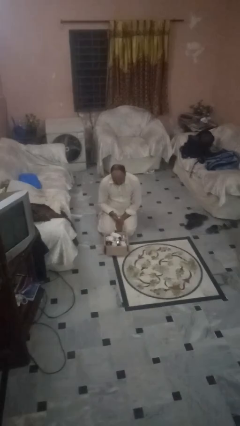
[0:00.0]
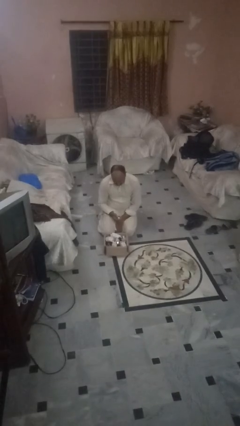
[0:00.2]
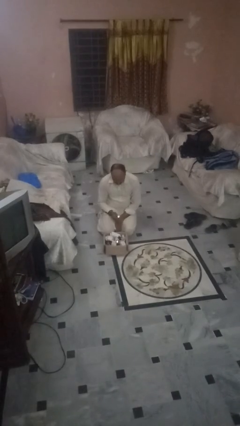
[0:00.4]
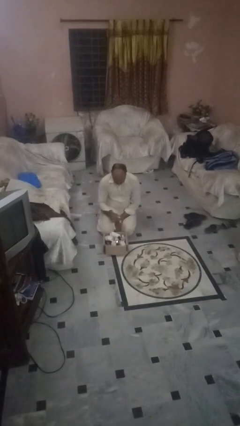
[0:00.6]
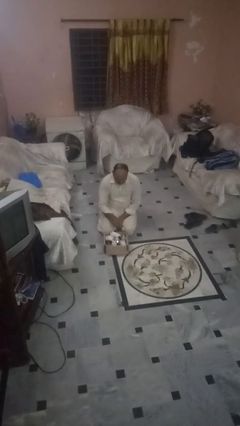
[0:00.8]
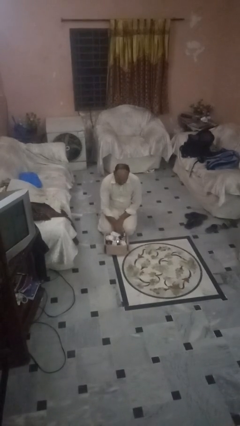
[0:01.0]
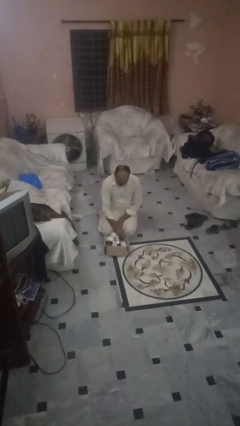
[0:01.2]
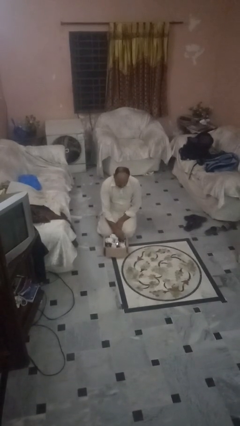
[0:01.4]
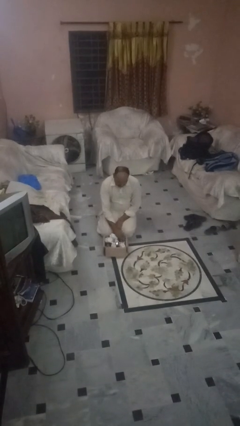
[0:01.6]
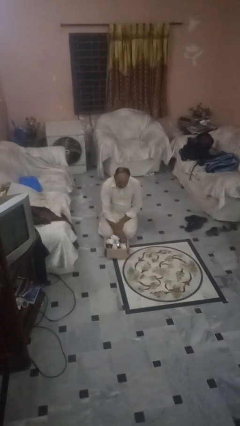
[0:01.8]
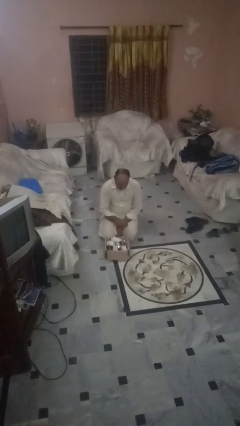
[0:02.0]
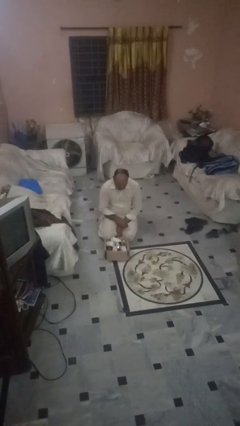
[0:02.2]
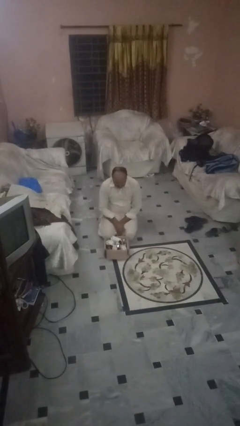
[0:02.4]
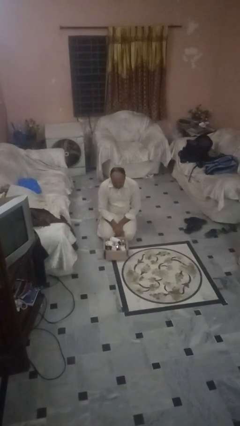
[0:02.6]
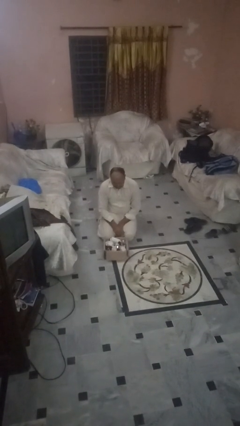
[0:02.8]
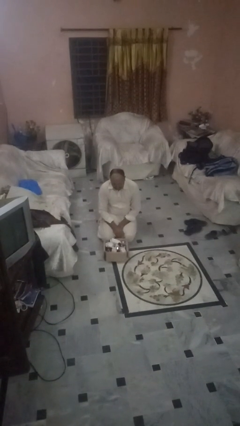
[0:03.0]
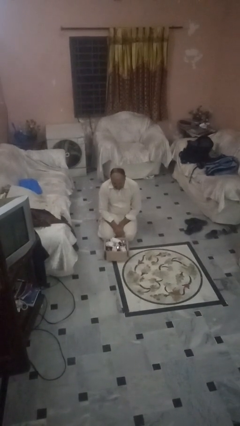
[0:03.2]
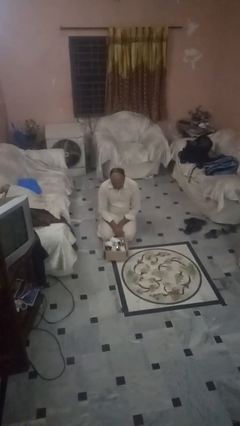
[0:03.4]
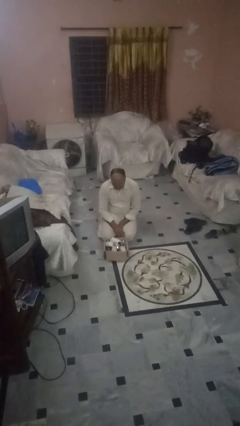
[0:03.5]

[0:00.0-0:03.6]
person puts object into box

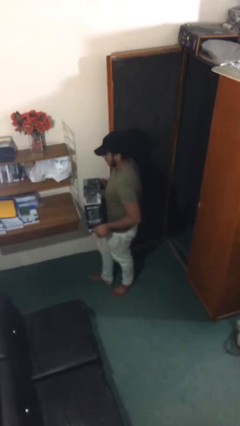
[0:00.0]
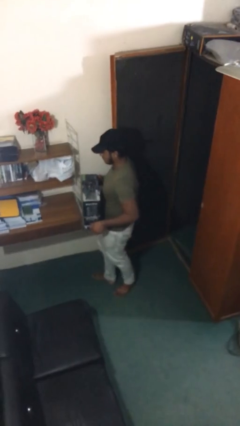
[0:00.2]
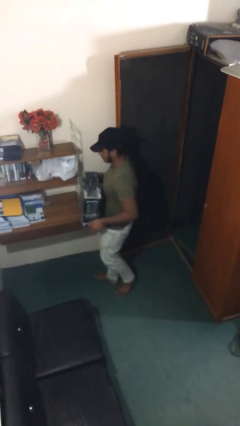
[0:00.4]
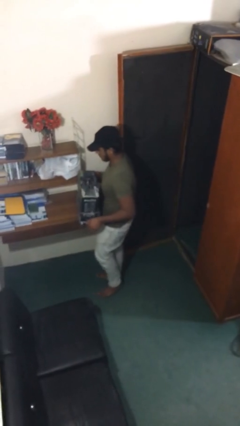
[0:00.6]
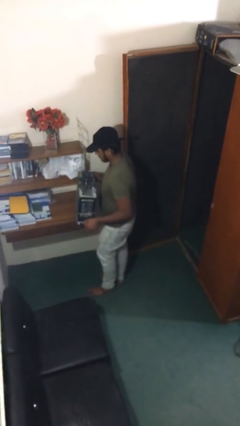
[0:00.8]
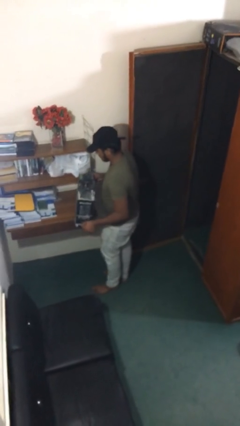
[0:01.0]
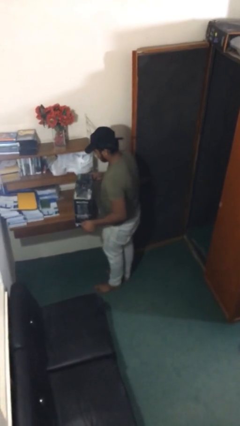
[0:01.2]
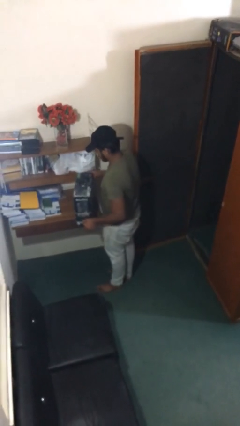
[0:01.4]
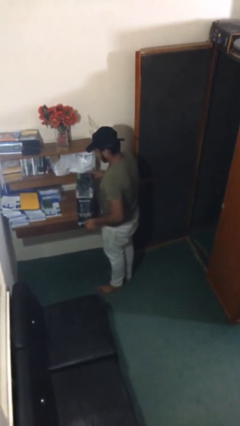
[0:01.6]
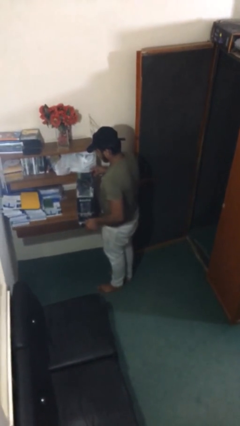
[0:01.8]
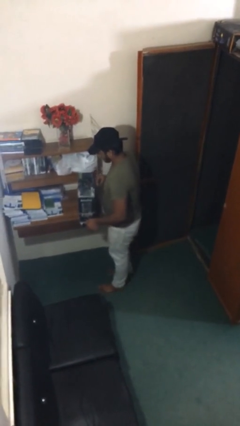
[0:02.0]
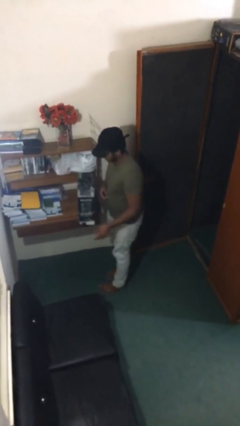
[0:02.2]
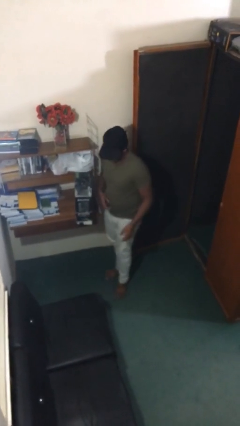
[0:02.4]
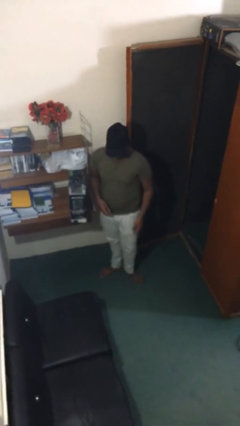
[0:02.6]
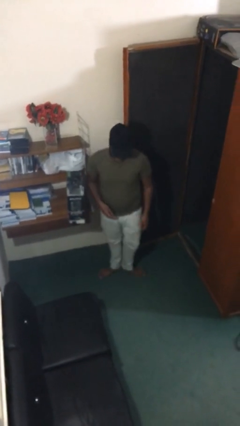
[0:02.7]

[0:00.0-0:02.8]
person puts down object on table

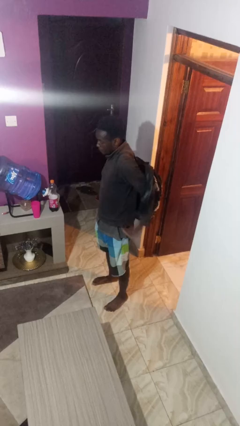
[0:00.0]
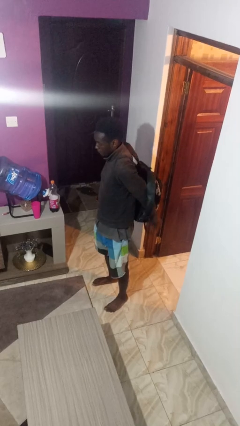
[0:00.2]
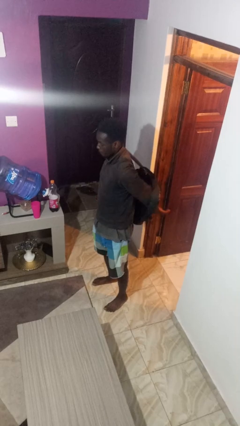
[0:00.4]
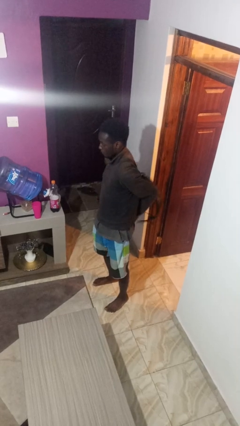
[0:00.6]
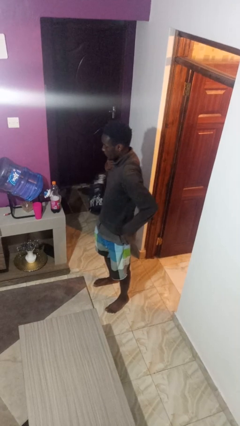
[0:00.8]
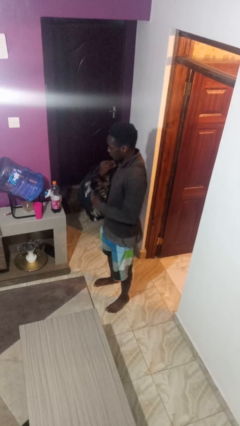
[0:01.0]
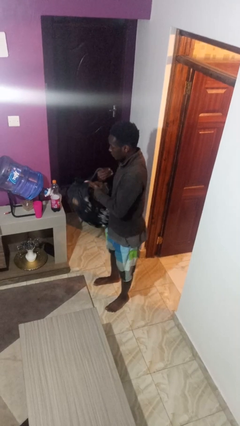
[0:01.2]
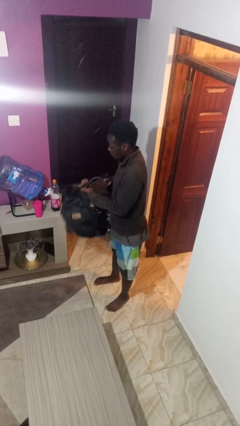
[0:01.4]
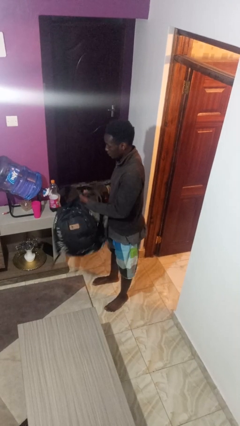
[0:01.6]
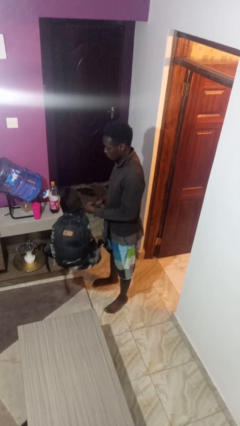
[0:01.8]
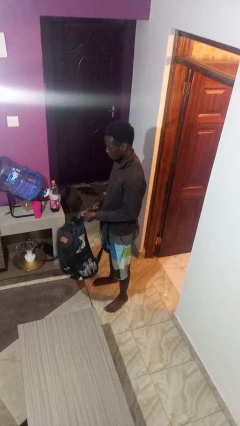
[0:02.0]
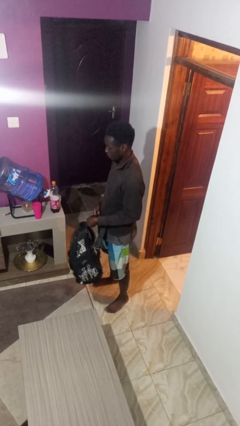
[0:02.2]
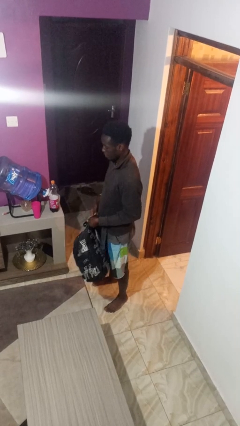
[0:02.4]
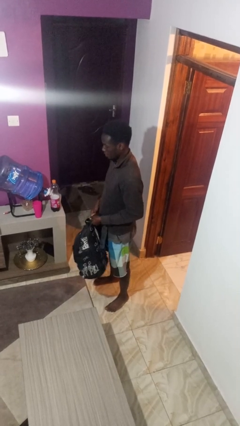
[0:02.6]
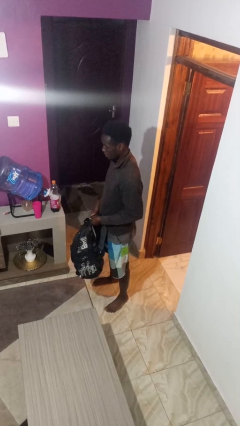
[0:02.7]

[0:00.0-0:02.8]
person takes off backpack

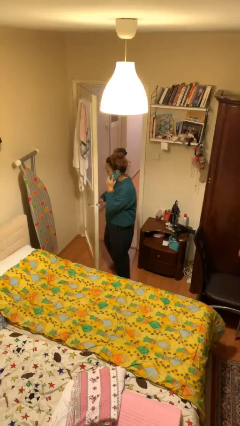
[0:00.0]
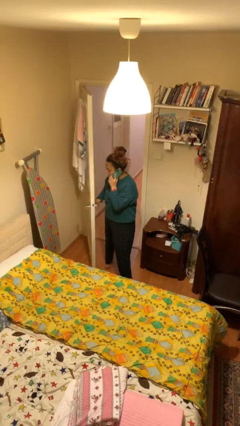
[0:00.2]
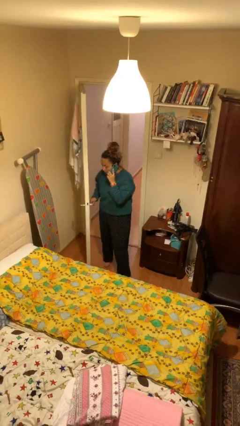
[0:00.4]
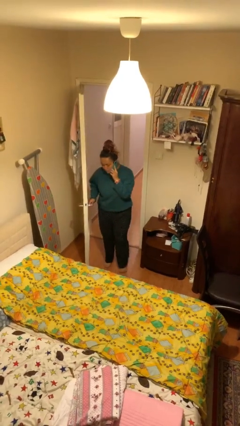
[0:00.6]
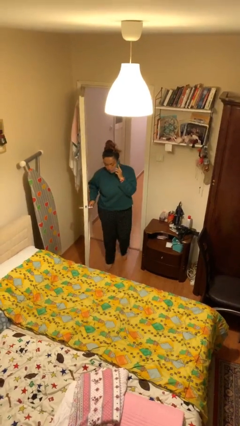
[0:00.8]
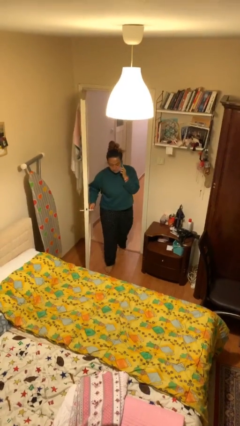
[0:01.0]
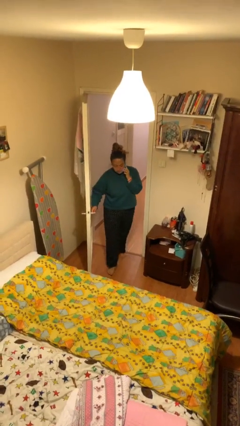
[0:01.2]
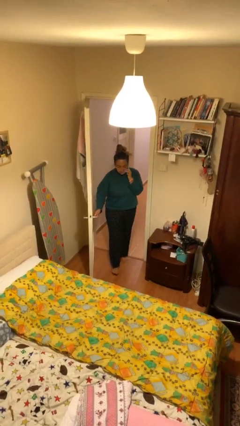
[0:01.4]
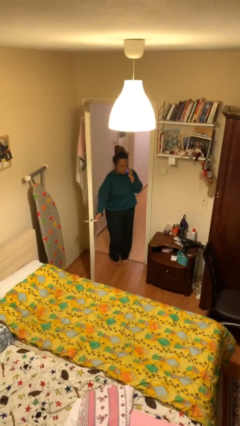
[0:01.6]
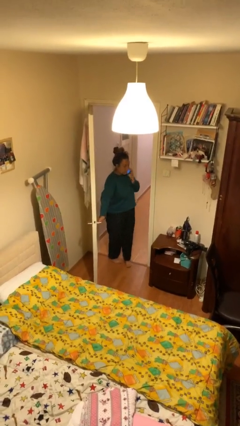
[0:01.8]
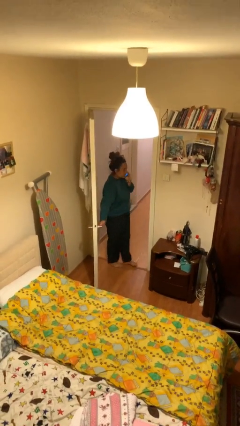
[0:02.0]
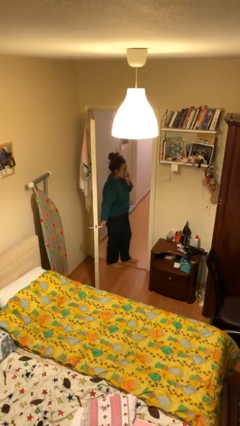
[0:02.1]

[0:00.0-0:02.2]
person exits scene through structure

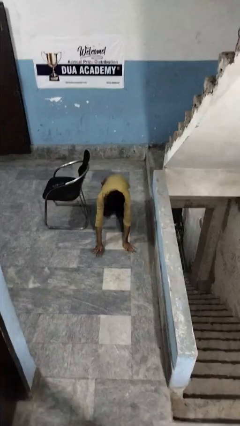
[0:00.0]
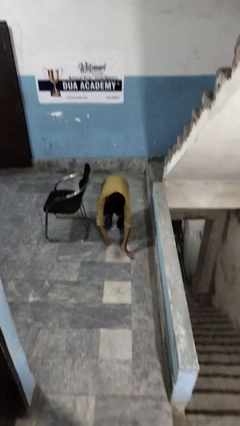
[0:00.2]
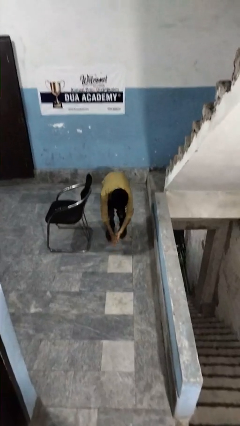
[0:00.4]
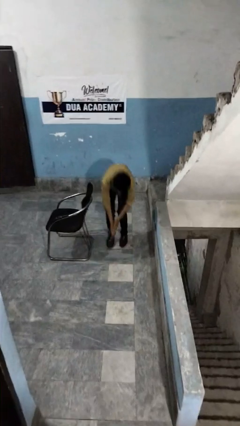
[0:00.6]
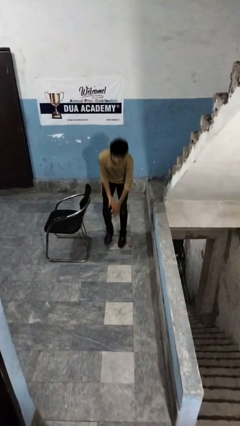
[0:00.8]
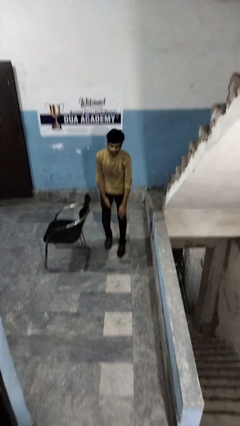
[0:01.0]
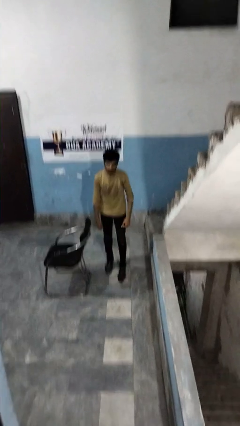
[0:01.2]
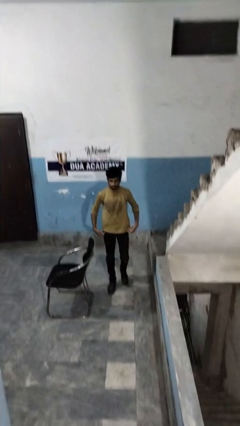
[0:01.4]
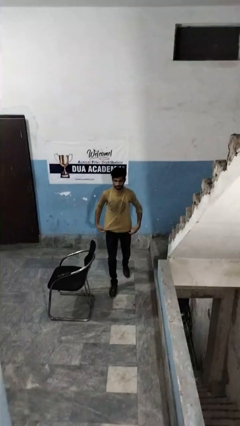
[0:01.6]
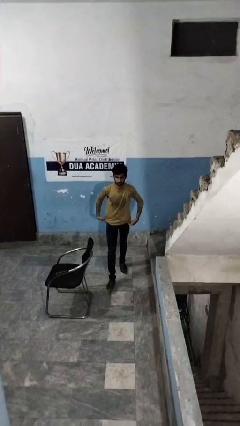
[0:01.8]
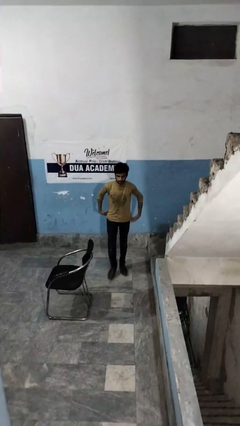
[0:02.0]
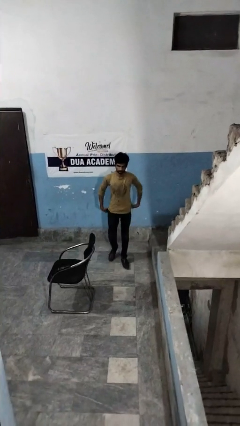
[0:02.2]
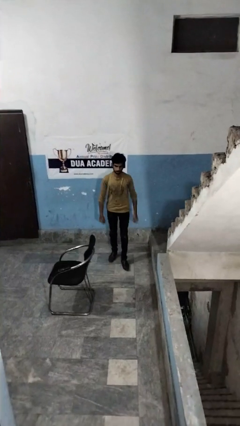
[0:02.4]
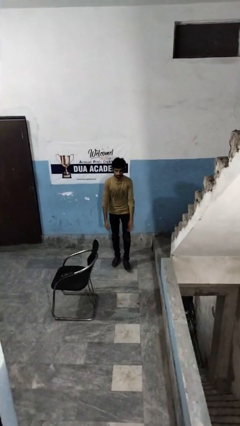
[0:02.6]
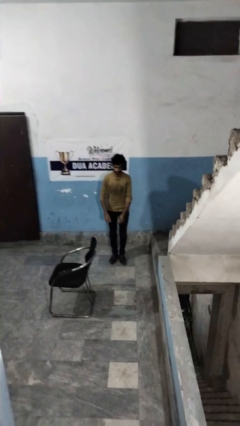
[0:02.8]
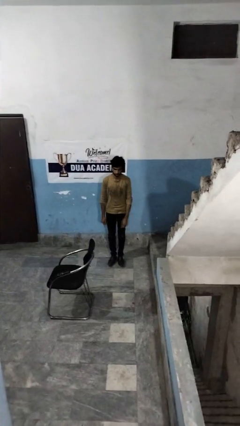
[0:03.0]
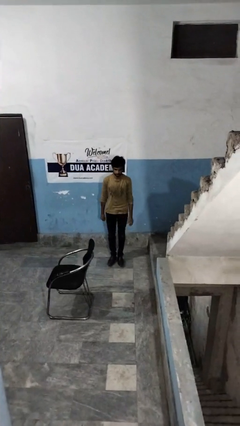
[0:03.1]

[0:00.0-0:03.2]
person stands up from floor

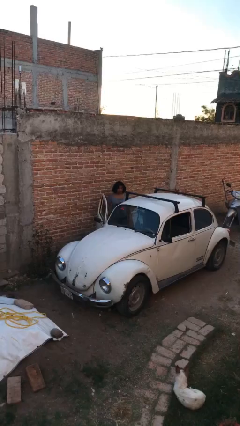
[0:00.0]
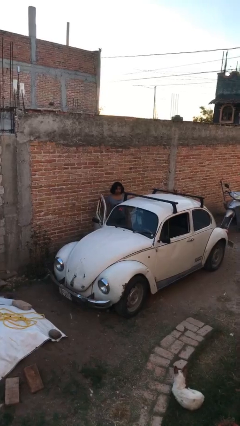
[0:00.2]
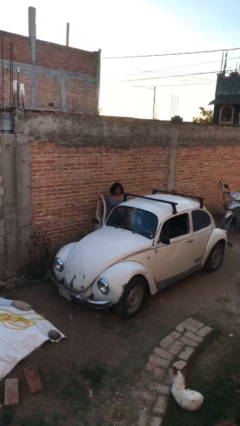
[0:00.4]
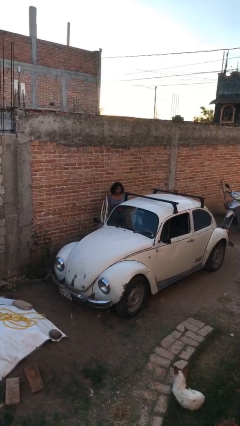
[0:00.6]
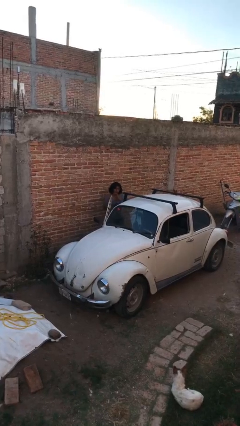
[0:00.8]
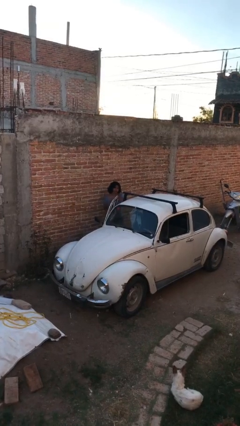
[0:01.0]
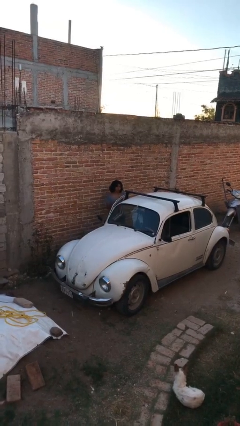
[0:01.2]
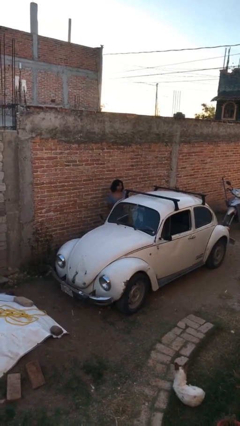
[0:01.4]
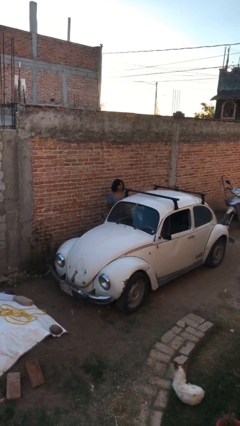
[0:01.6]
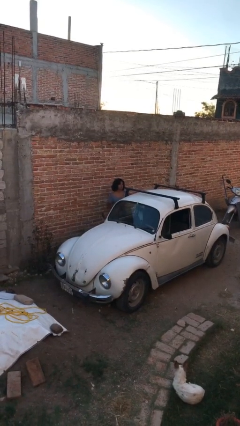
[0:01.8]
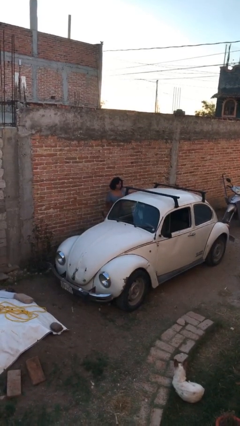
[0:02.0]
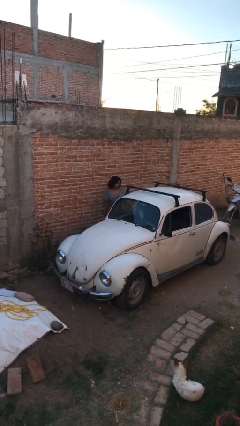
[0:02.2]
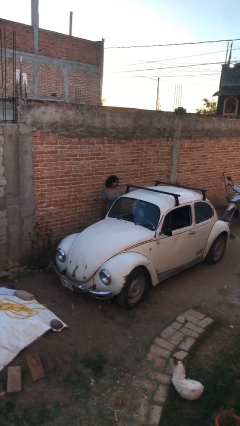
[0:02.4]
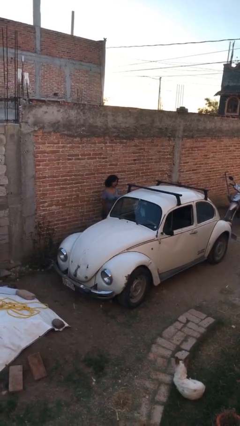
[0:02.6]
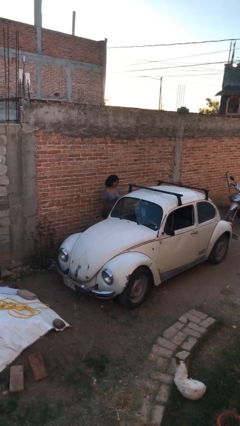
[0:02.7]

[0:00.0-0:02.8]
person closes car door

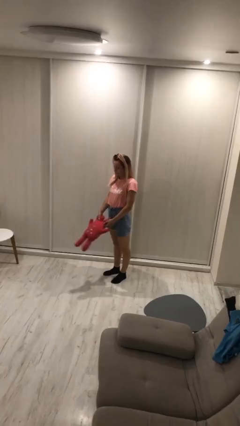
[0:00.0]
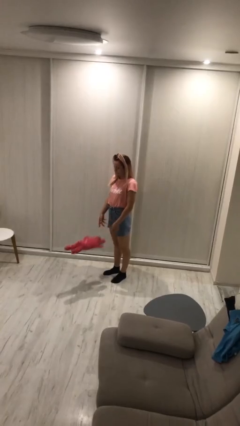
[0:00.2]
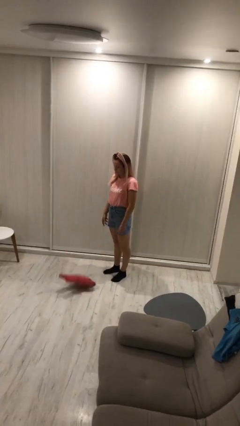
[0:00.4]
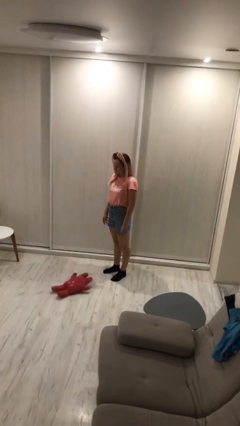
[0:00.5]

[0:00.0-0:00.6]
person throws object to ground
